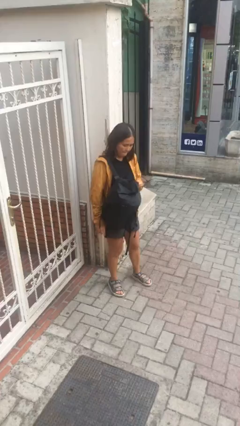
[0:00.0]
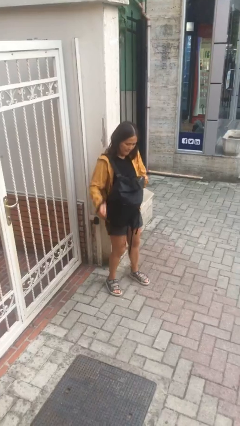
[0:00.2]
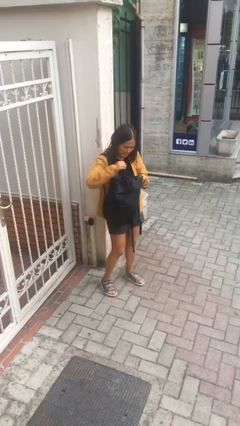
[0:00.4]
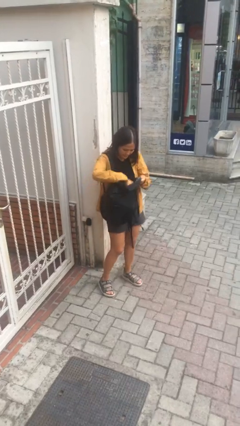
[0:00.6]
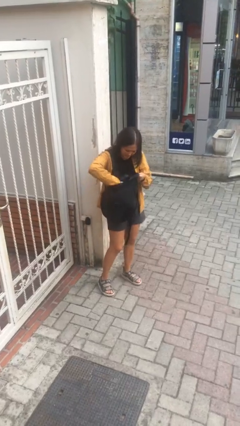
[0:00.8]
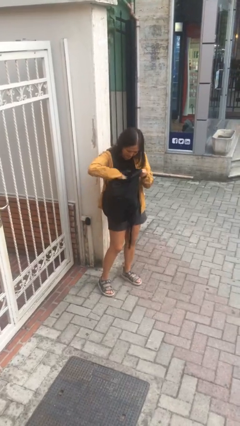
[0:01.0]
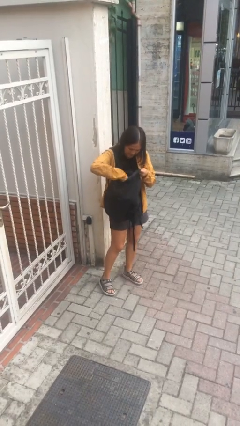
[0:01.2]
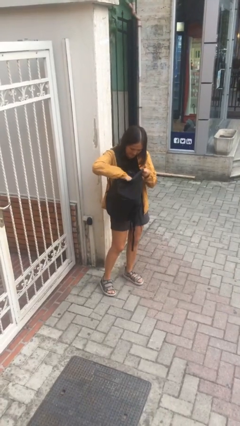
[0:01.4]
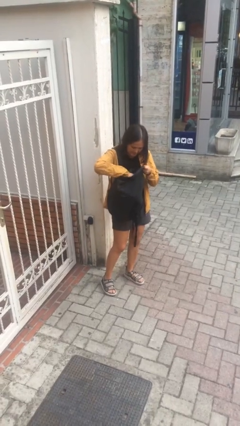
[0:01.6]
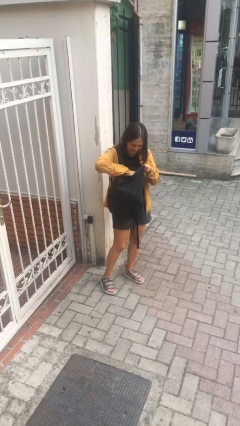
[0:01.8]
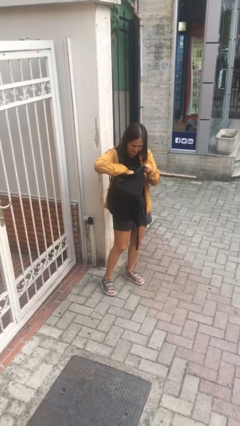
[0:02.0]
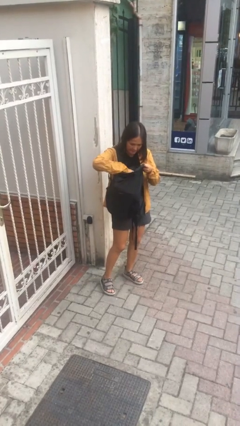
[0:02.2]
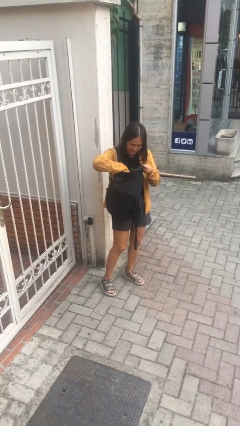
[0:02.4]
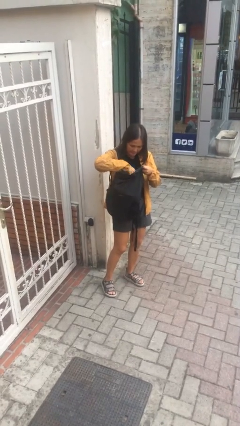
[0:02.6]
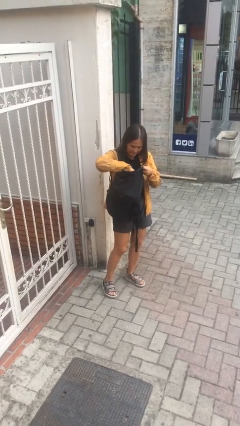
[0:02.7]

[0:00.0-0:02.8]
person searches in backpack

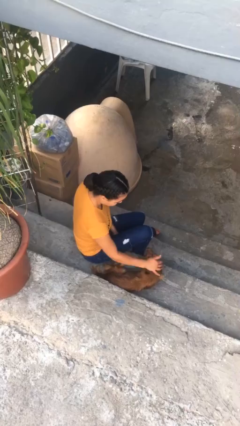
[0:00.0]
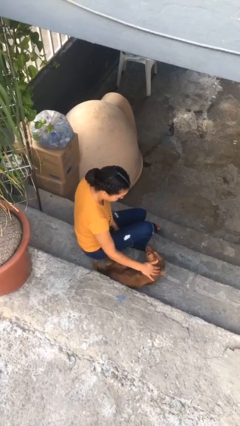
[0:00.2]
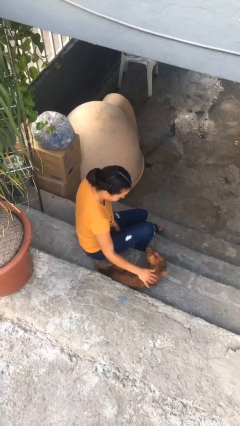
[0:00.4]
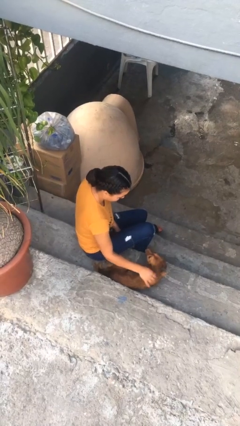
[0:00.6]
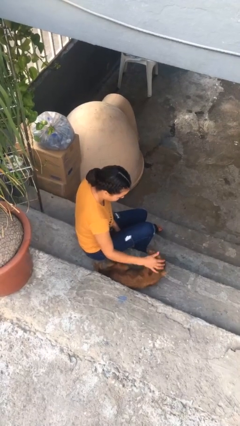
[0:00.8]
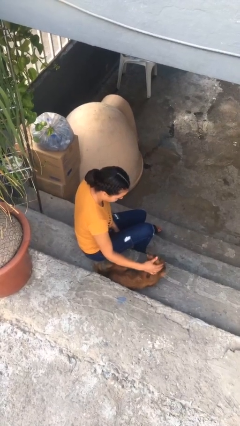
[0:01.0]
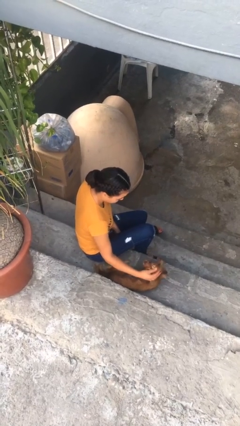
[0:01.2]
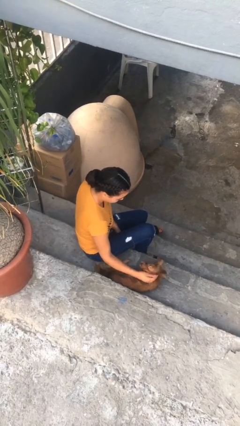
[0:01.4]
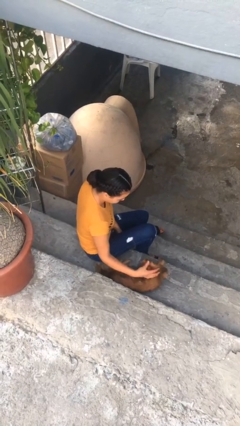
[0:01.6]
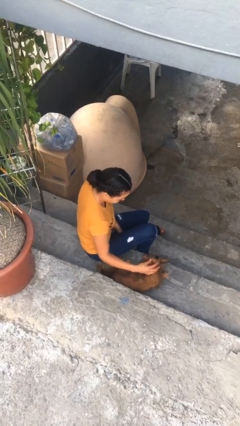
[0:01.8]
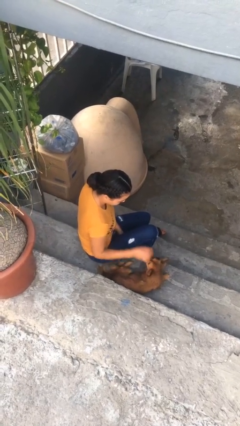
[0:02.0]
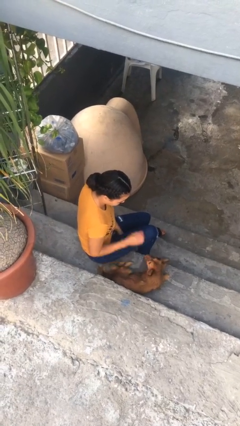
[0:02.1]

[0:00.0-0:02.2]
person pets dog

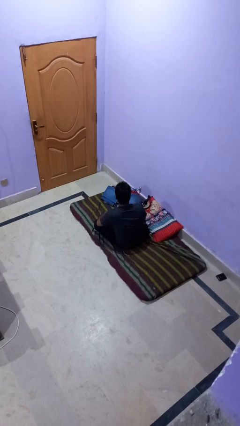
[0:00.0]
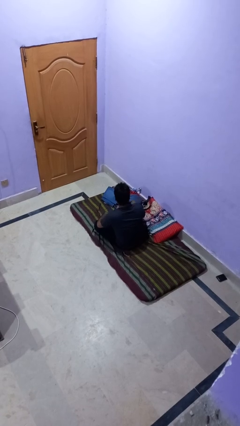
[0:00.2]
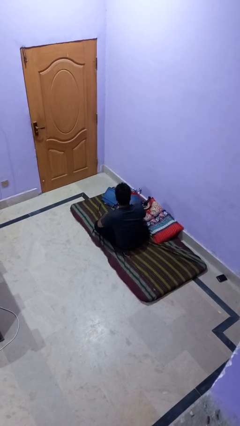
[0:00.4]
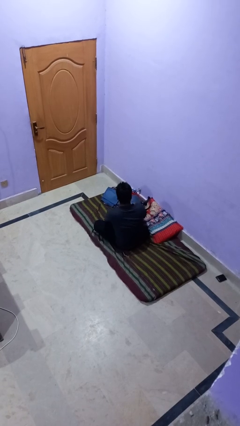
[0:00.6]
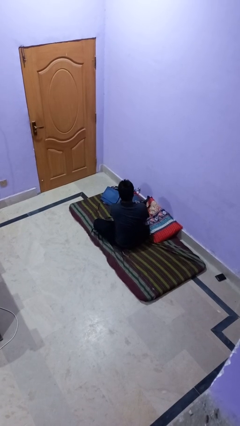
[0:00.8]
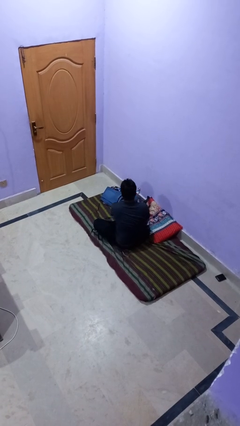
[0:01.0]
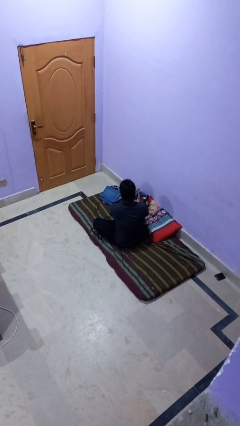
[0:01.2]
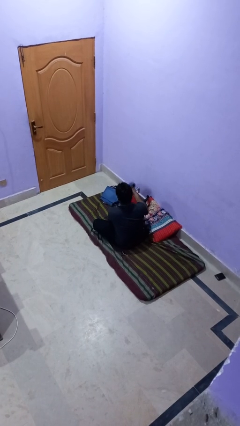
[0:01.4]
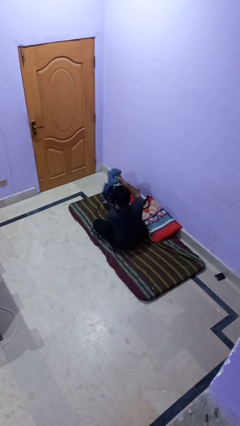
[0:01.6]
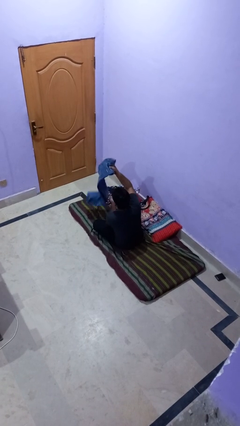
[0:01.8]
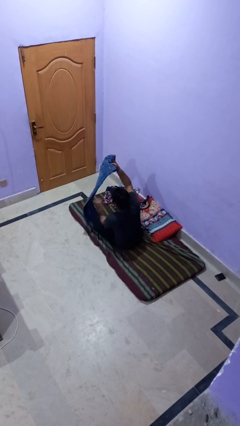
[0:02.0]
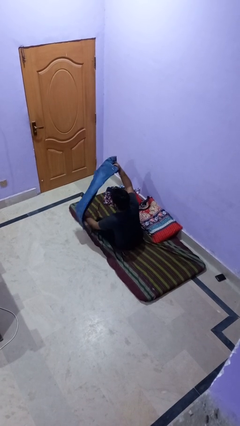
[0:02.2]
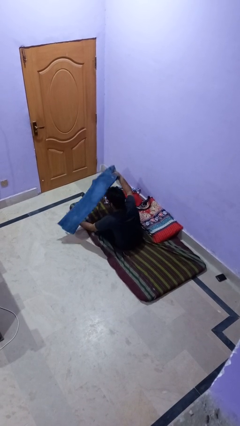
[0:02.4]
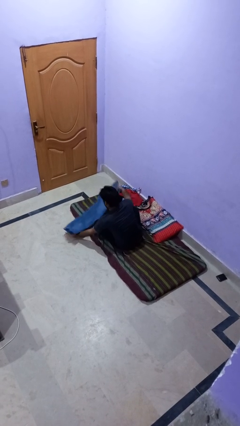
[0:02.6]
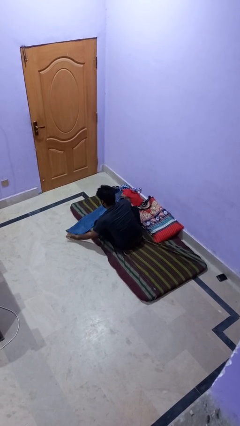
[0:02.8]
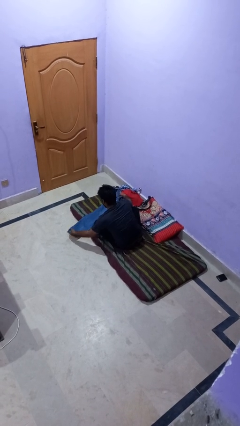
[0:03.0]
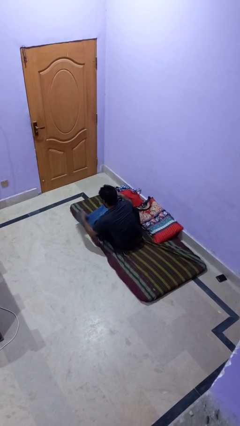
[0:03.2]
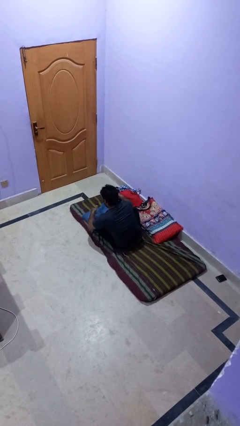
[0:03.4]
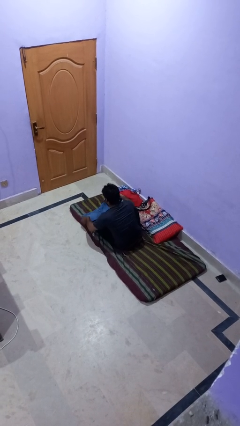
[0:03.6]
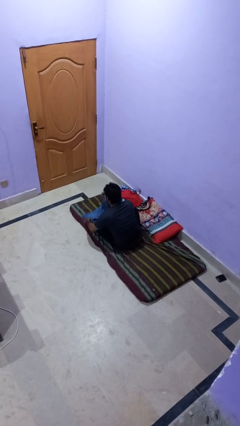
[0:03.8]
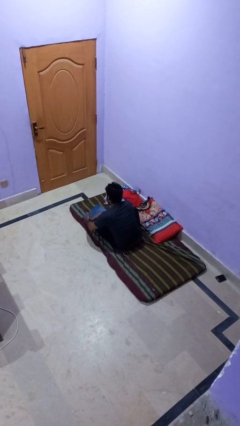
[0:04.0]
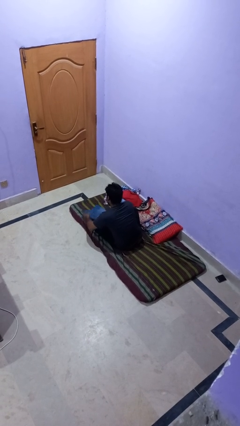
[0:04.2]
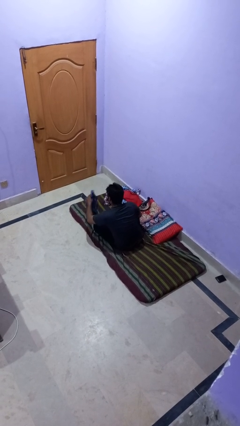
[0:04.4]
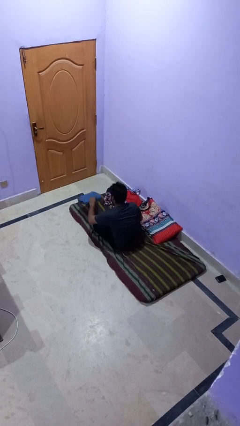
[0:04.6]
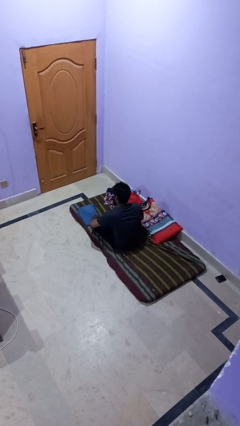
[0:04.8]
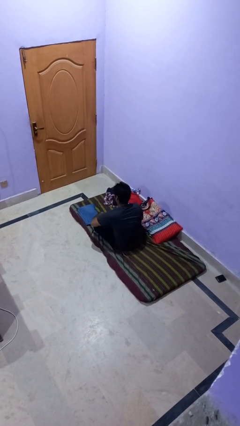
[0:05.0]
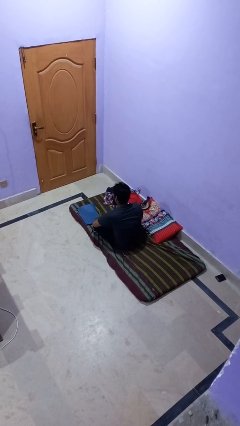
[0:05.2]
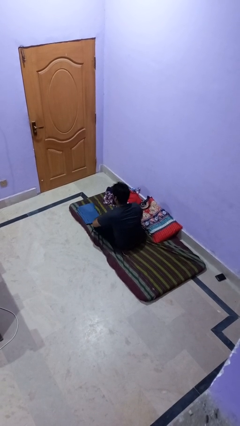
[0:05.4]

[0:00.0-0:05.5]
person folds pants

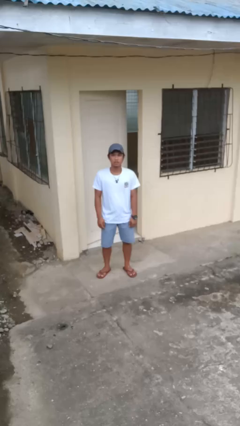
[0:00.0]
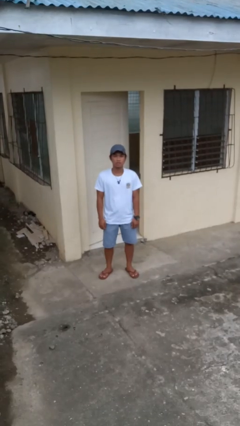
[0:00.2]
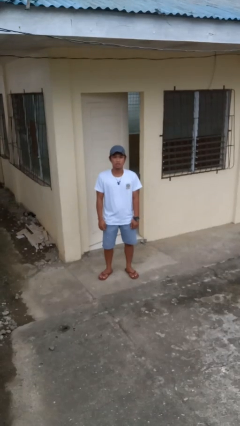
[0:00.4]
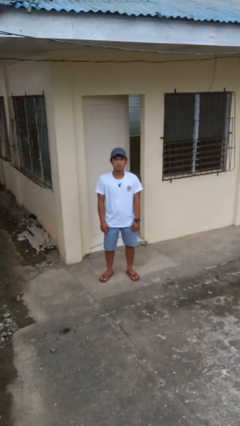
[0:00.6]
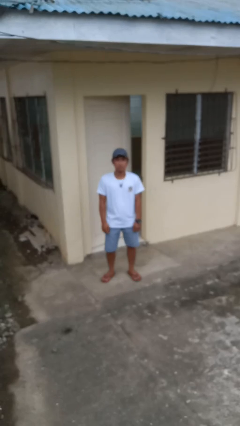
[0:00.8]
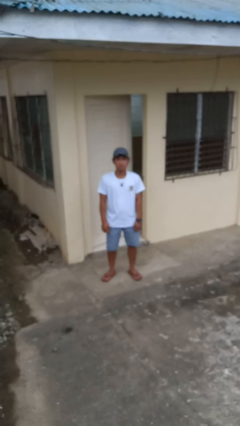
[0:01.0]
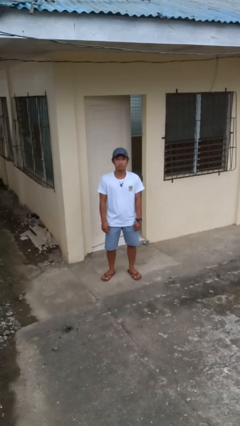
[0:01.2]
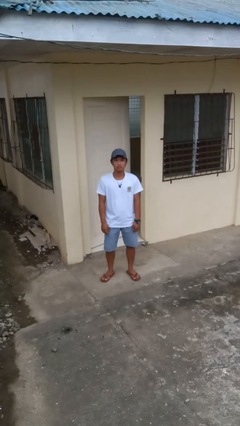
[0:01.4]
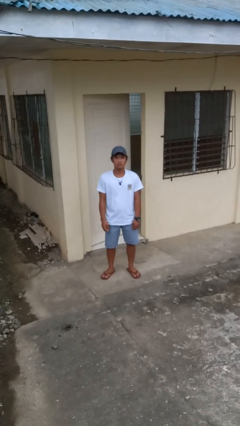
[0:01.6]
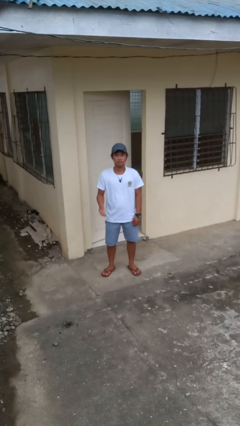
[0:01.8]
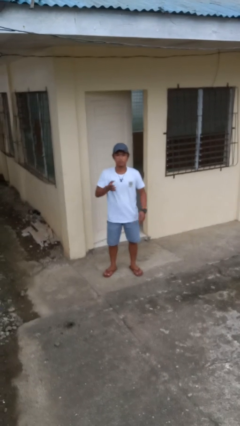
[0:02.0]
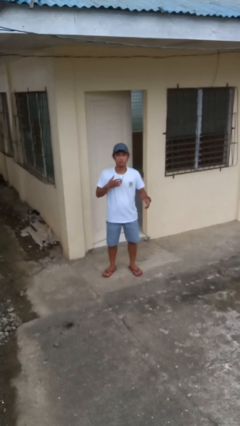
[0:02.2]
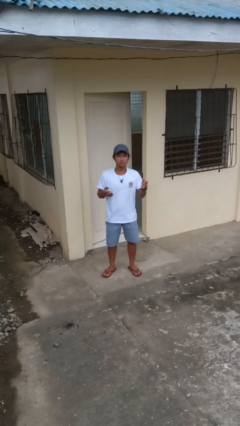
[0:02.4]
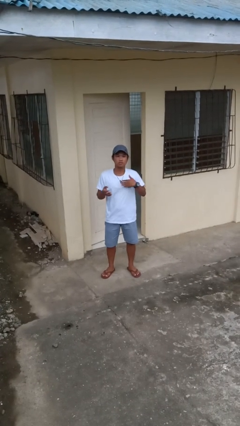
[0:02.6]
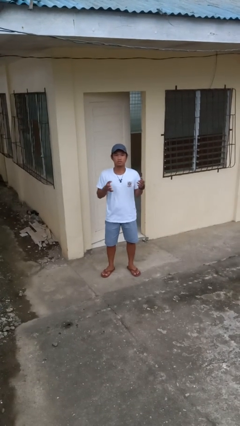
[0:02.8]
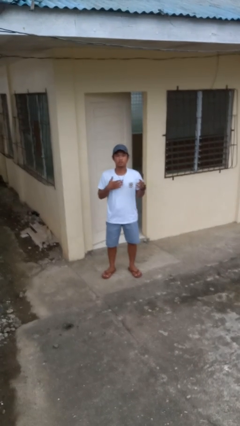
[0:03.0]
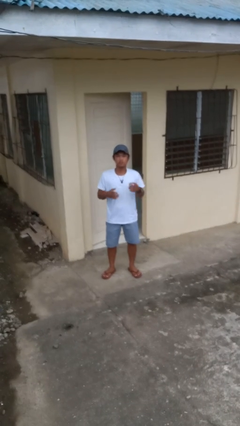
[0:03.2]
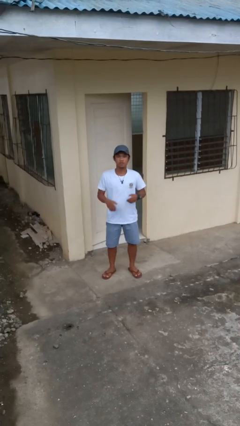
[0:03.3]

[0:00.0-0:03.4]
person drums on chest

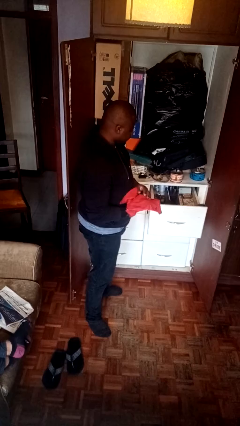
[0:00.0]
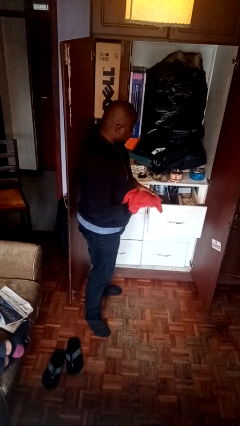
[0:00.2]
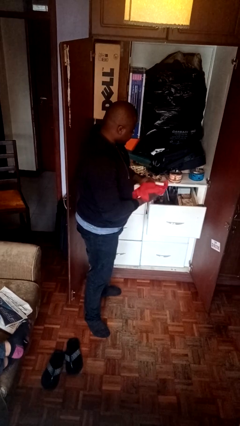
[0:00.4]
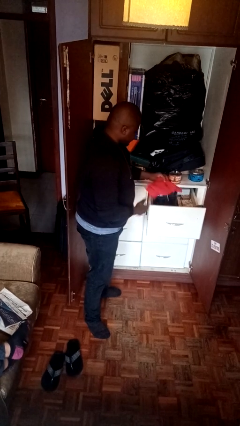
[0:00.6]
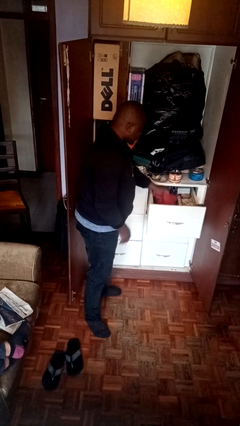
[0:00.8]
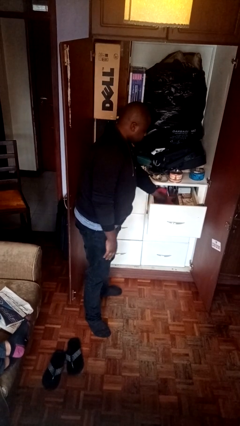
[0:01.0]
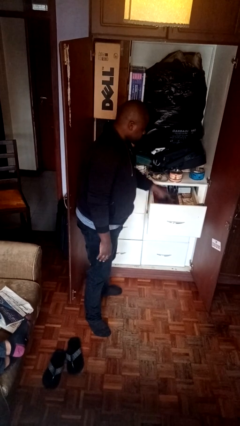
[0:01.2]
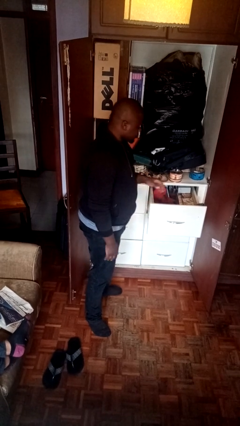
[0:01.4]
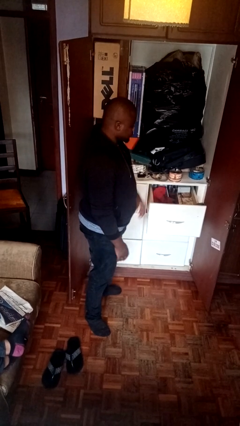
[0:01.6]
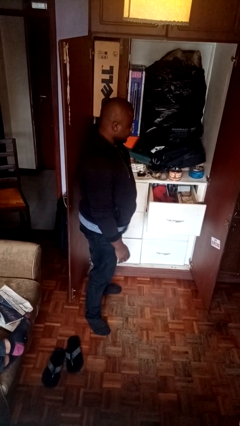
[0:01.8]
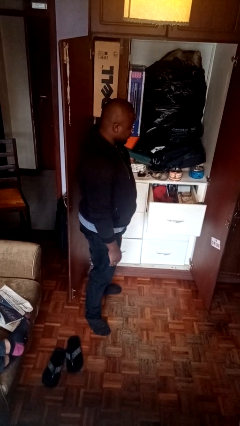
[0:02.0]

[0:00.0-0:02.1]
person puts clothes into dresser

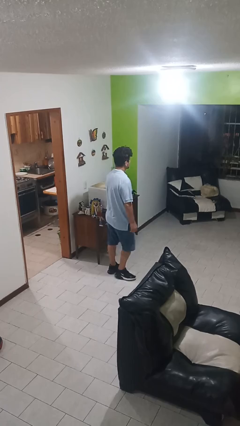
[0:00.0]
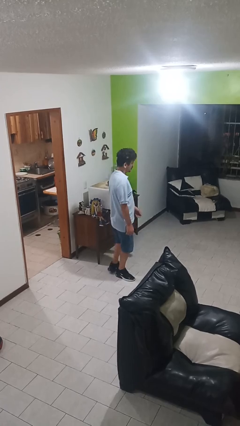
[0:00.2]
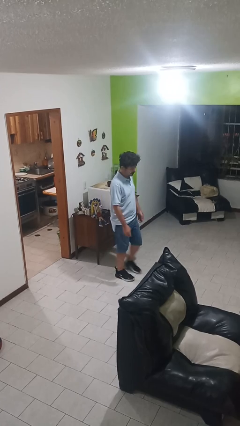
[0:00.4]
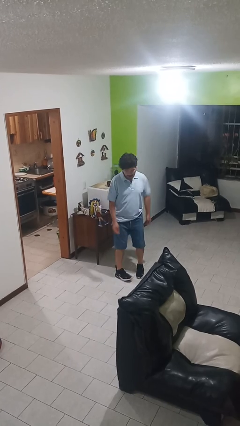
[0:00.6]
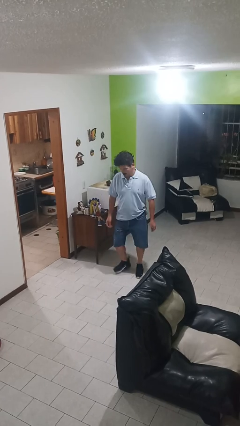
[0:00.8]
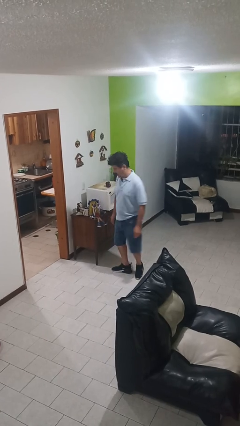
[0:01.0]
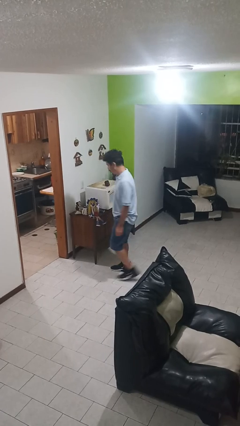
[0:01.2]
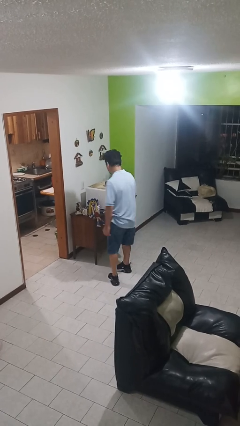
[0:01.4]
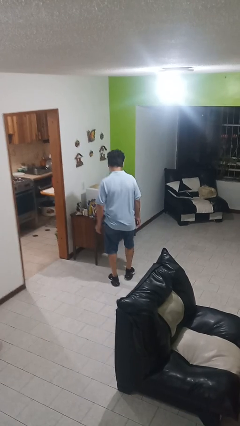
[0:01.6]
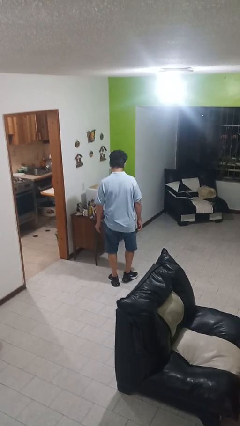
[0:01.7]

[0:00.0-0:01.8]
person twirls
